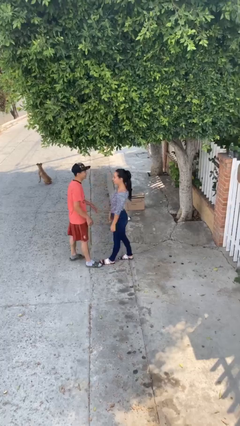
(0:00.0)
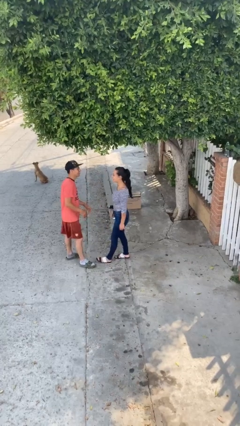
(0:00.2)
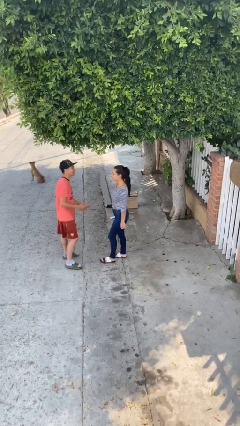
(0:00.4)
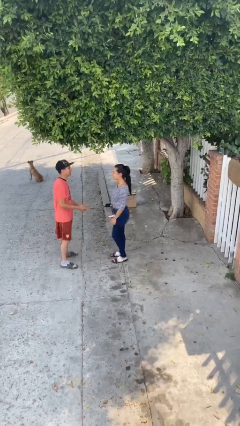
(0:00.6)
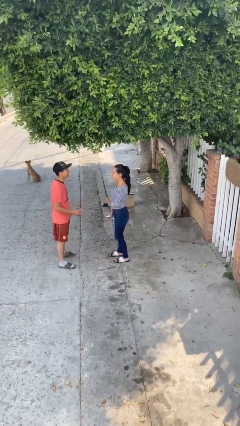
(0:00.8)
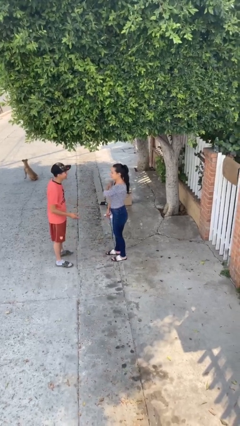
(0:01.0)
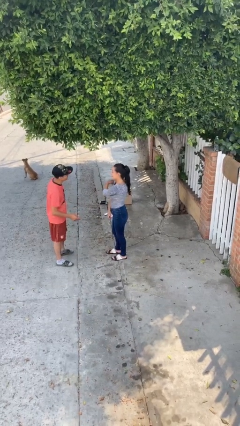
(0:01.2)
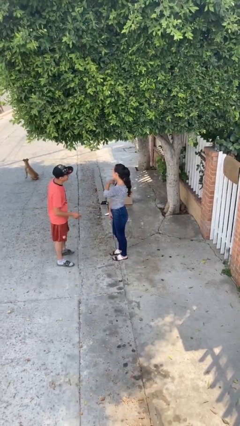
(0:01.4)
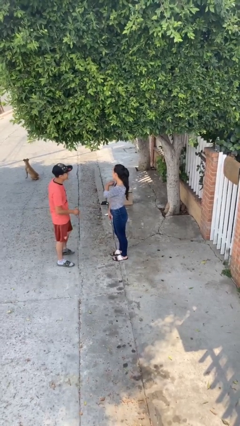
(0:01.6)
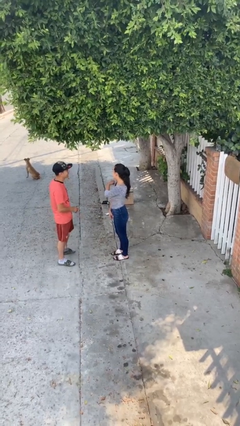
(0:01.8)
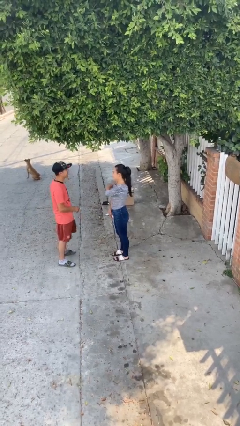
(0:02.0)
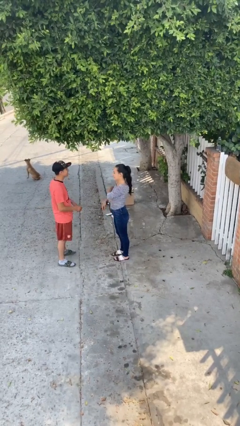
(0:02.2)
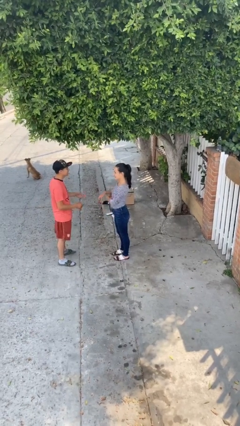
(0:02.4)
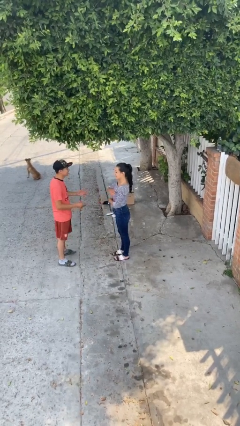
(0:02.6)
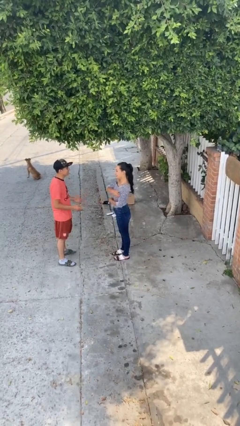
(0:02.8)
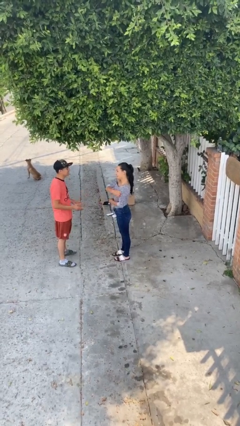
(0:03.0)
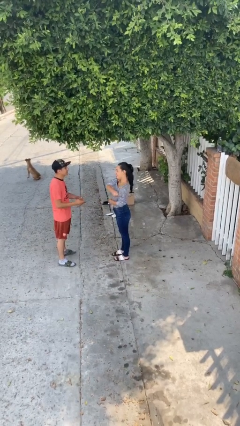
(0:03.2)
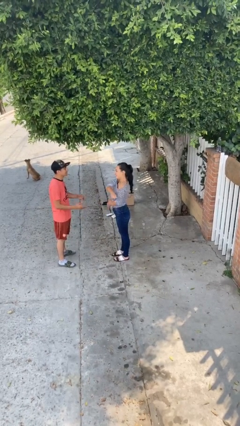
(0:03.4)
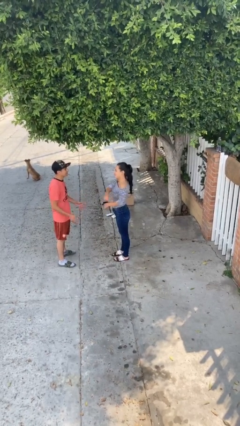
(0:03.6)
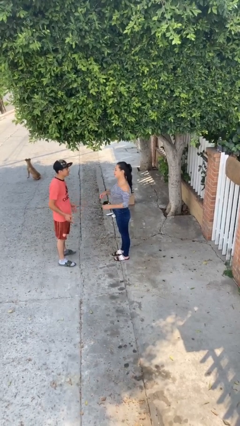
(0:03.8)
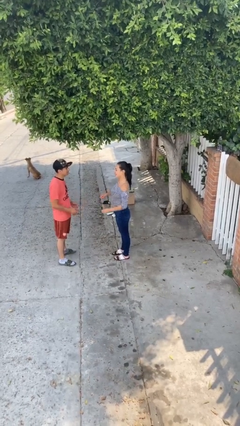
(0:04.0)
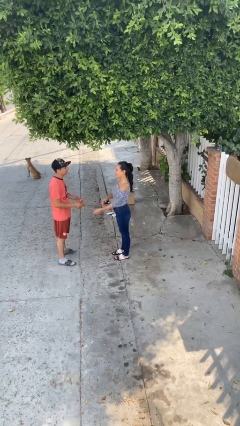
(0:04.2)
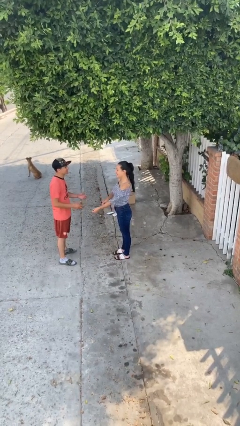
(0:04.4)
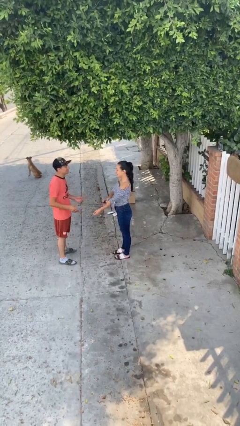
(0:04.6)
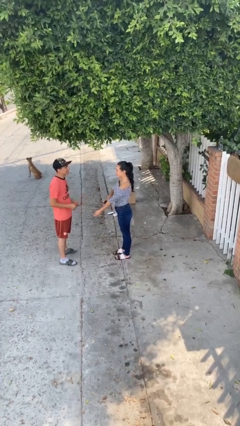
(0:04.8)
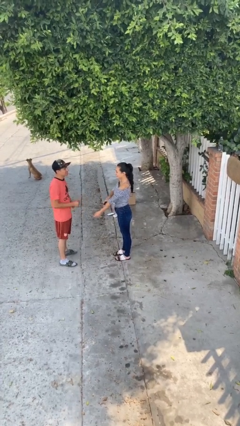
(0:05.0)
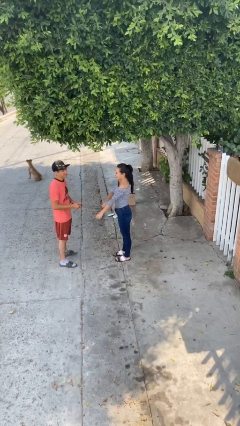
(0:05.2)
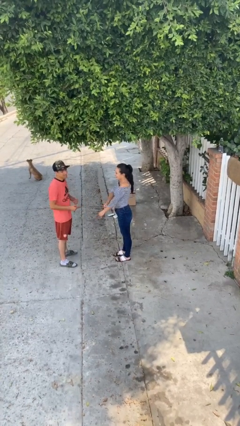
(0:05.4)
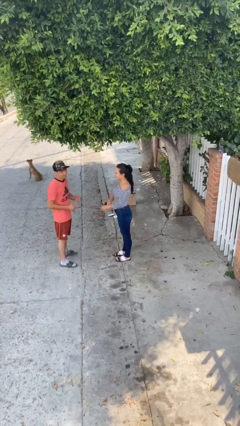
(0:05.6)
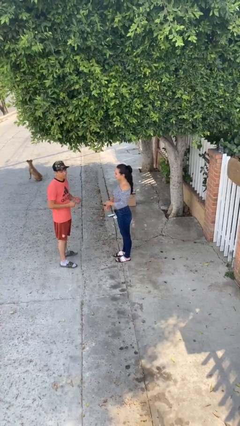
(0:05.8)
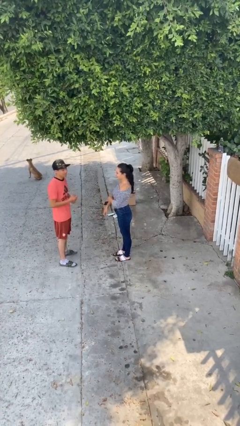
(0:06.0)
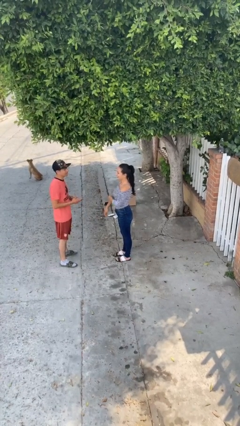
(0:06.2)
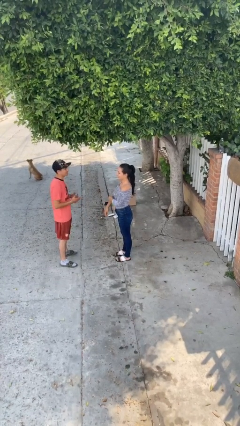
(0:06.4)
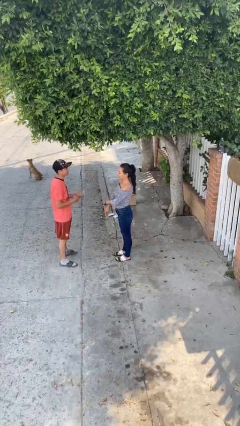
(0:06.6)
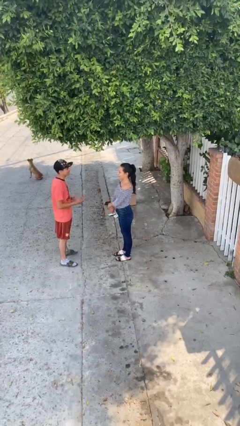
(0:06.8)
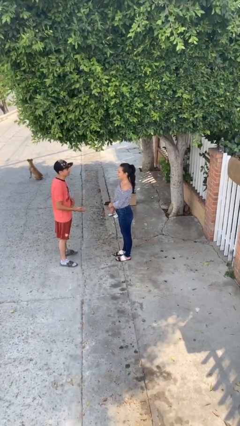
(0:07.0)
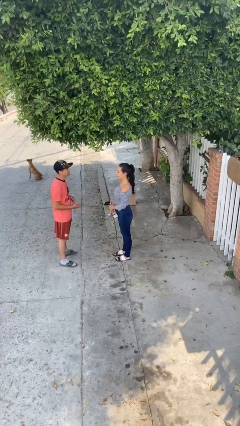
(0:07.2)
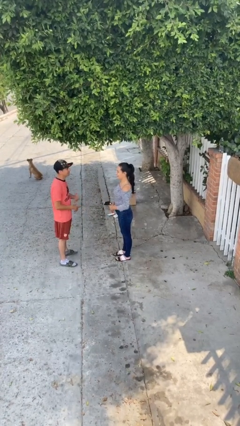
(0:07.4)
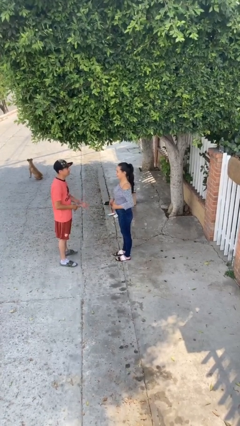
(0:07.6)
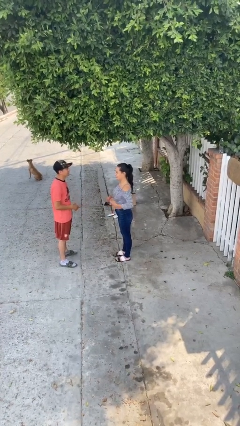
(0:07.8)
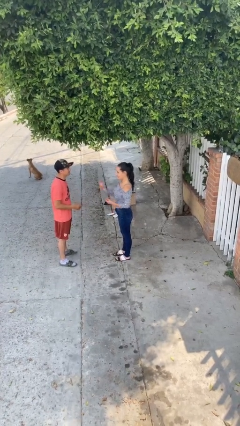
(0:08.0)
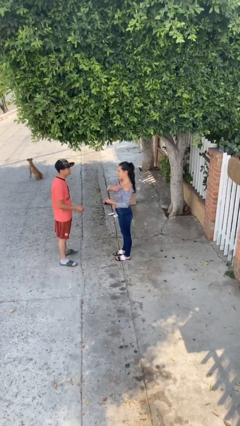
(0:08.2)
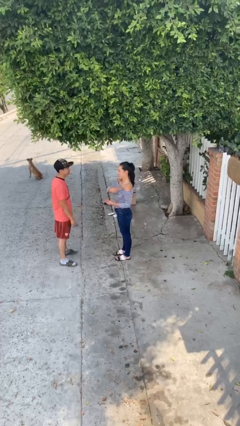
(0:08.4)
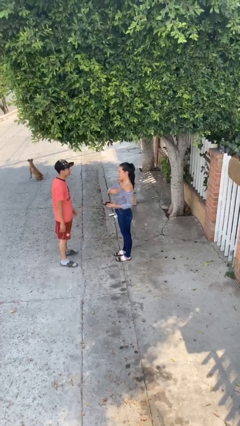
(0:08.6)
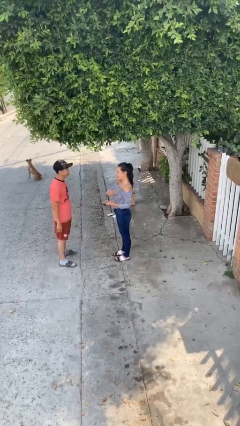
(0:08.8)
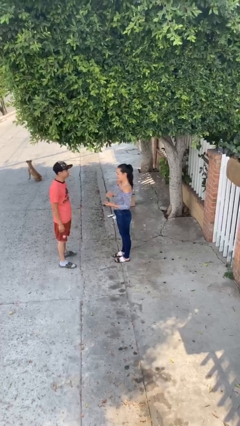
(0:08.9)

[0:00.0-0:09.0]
person talks to person

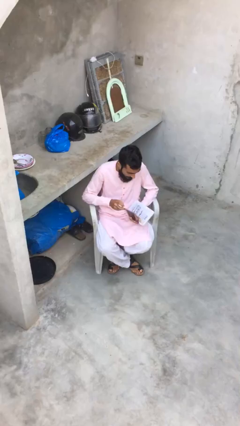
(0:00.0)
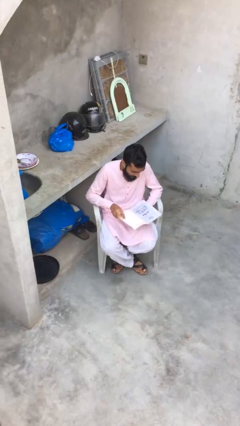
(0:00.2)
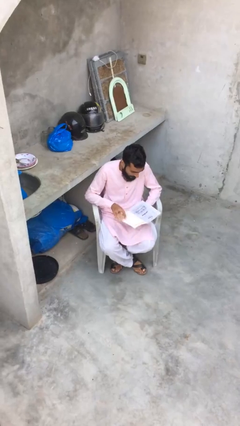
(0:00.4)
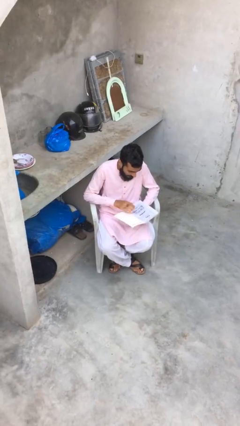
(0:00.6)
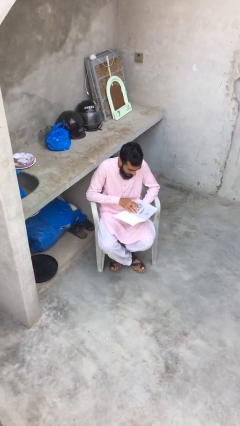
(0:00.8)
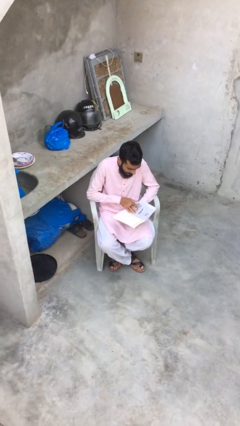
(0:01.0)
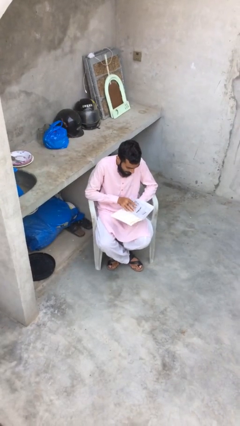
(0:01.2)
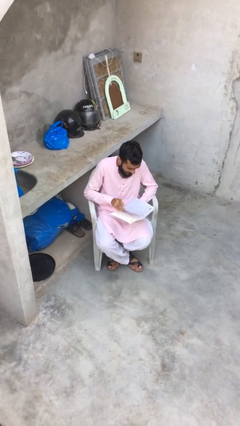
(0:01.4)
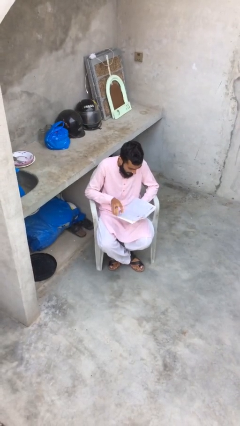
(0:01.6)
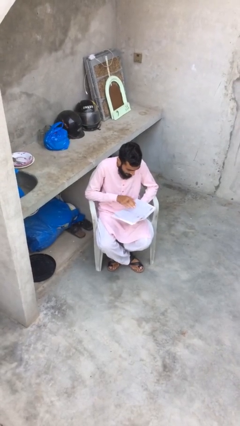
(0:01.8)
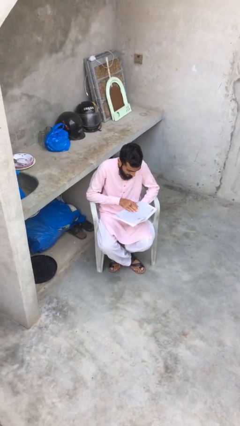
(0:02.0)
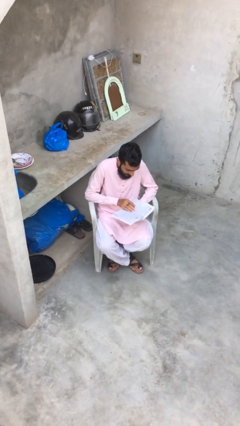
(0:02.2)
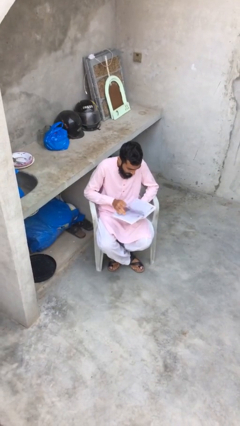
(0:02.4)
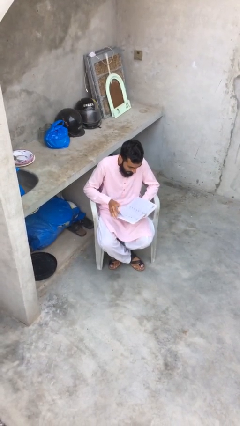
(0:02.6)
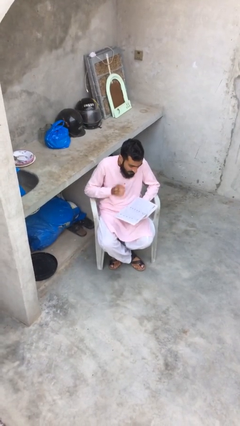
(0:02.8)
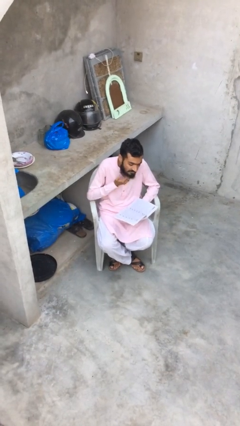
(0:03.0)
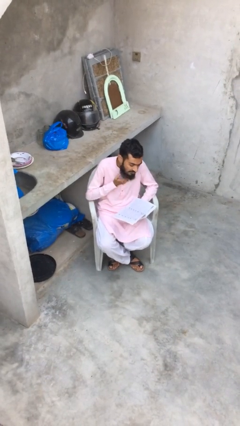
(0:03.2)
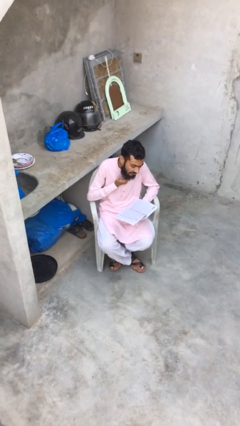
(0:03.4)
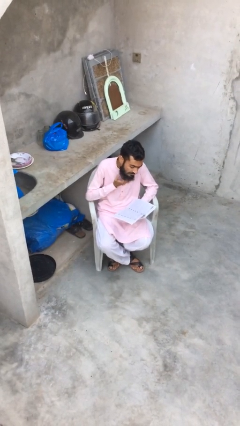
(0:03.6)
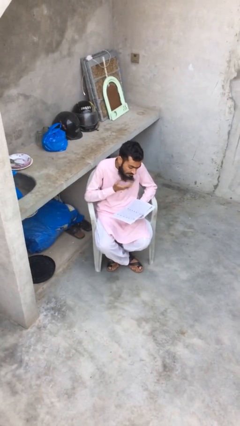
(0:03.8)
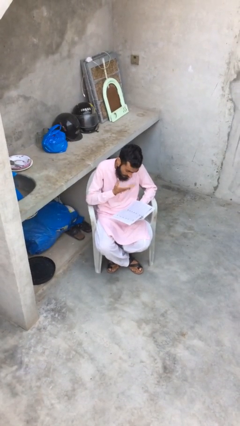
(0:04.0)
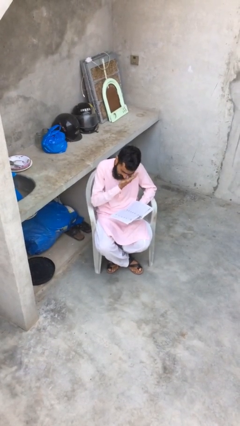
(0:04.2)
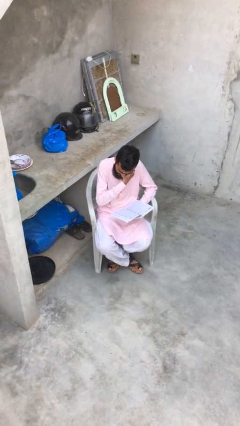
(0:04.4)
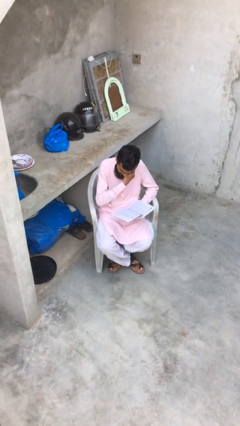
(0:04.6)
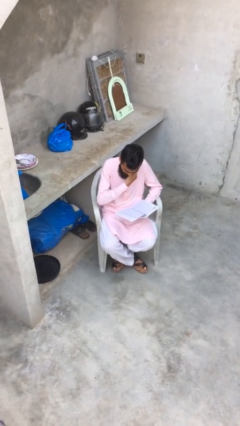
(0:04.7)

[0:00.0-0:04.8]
person reads document

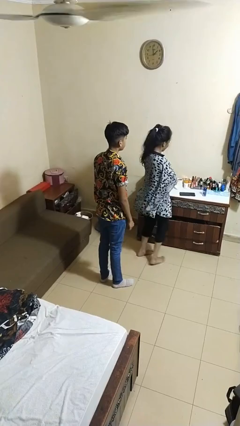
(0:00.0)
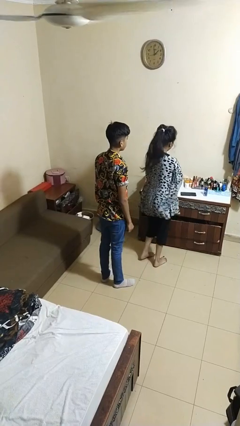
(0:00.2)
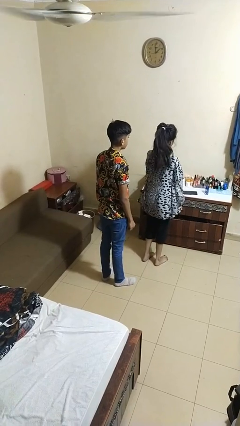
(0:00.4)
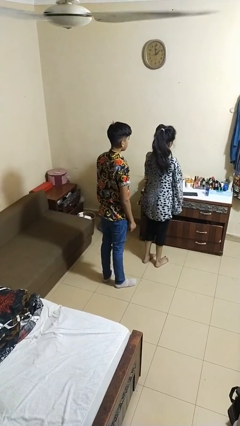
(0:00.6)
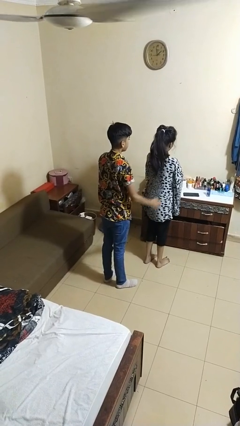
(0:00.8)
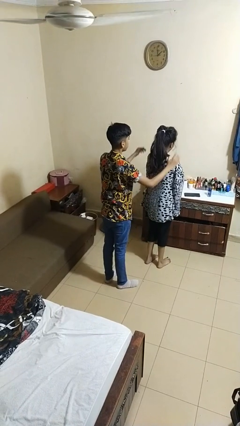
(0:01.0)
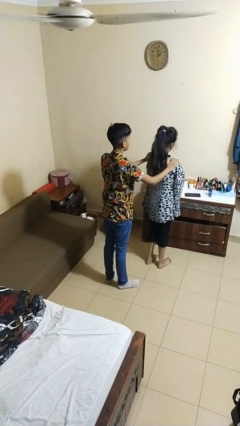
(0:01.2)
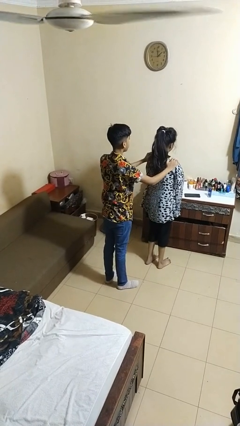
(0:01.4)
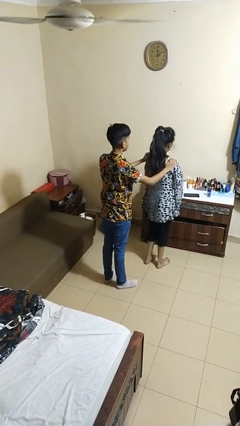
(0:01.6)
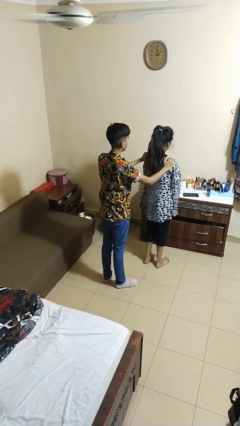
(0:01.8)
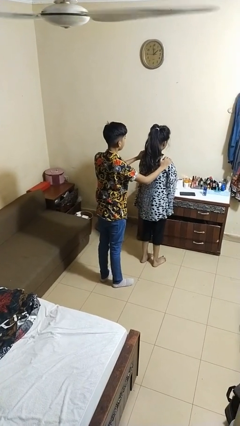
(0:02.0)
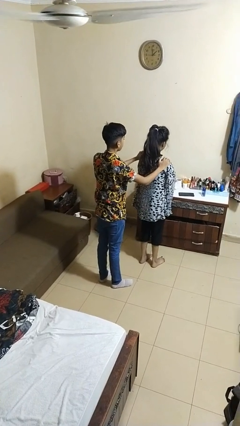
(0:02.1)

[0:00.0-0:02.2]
person grabs person by shoulder

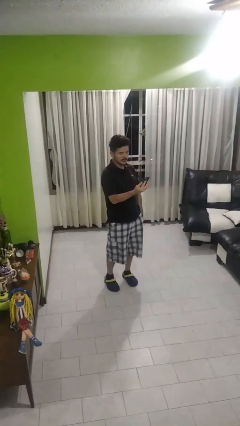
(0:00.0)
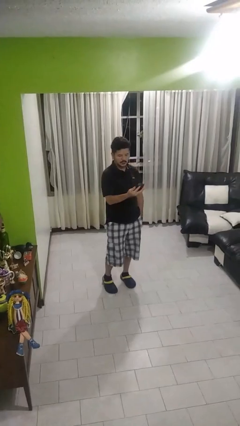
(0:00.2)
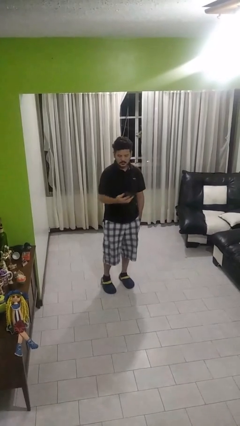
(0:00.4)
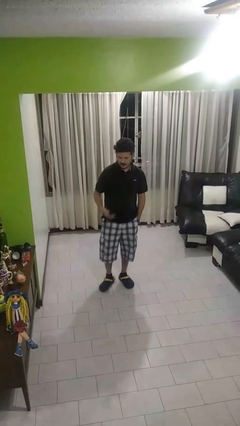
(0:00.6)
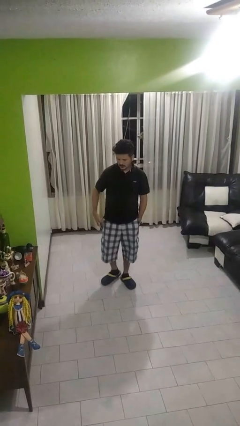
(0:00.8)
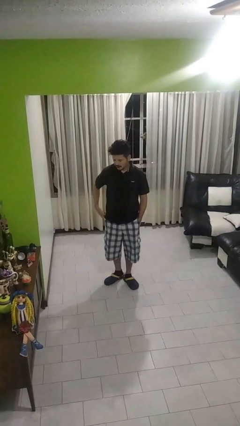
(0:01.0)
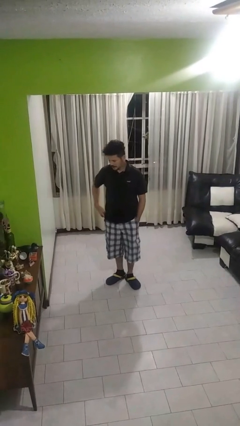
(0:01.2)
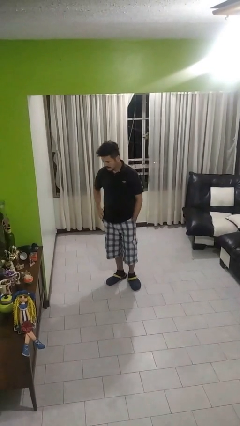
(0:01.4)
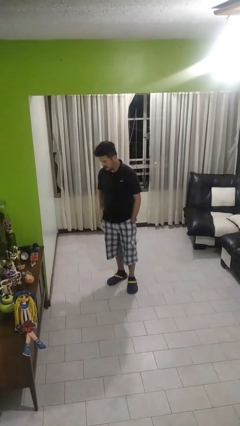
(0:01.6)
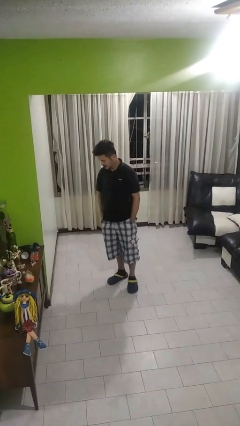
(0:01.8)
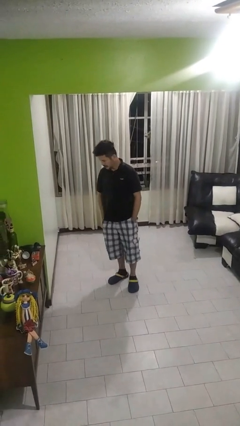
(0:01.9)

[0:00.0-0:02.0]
person puts phone into pocket

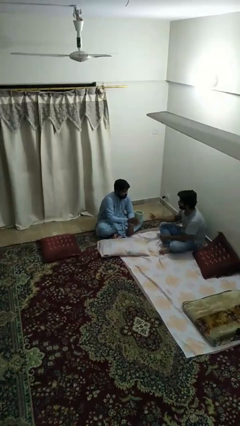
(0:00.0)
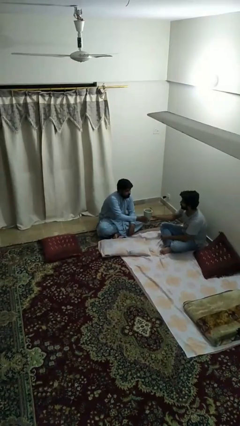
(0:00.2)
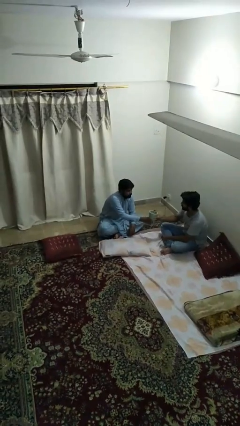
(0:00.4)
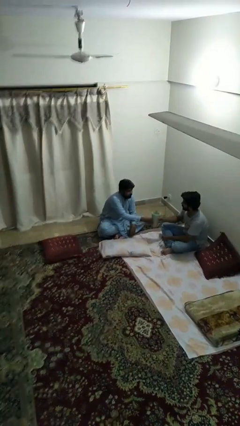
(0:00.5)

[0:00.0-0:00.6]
person transfers object to person
